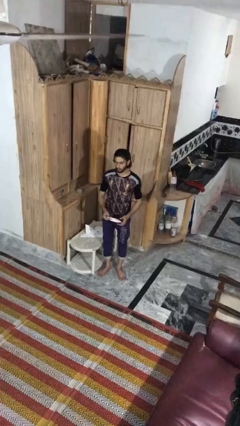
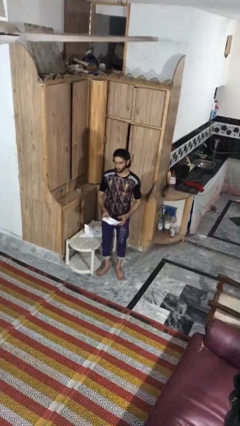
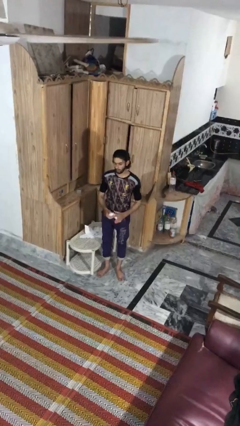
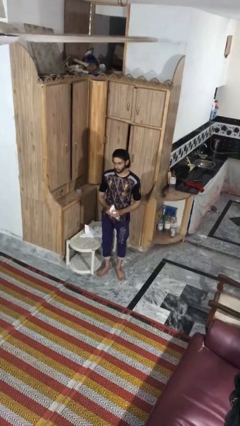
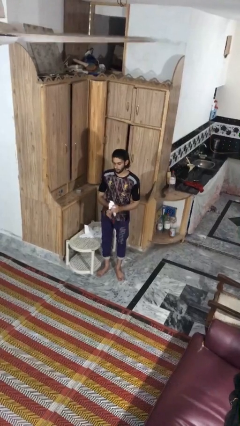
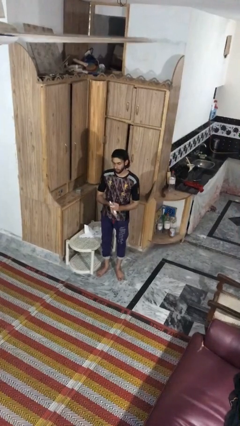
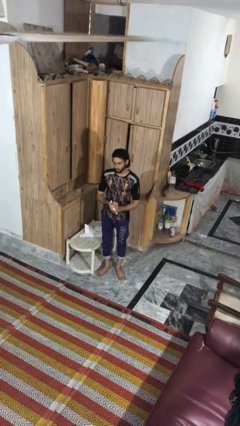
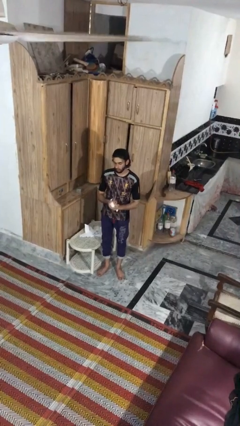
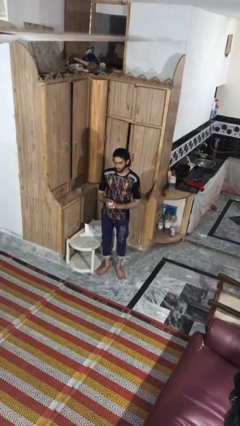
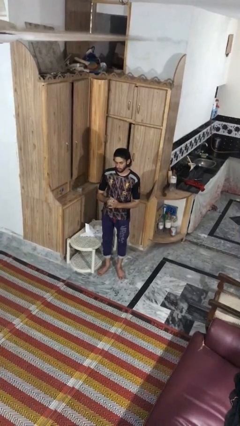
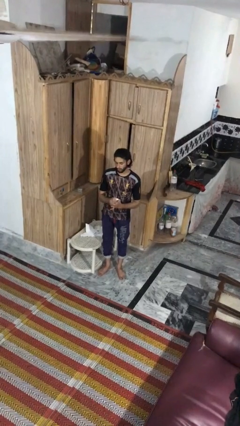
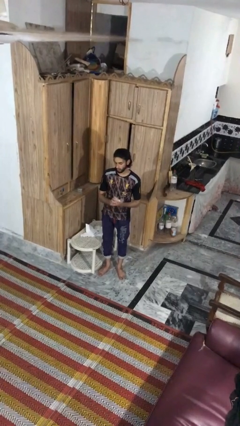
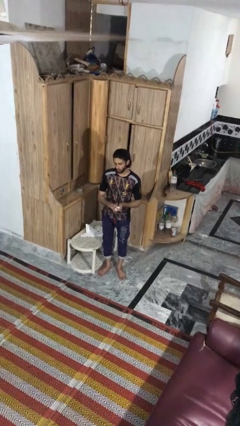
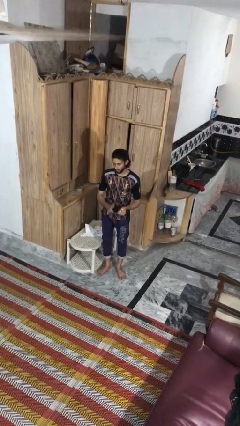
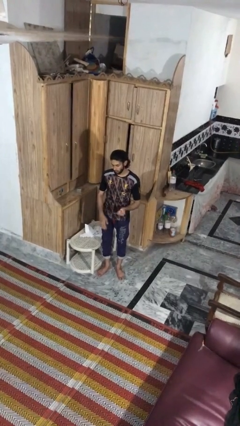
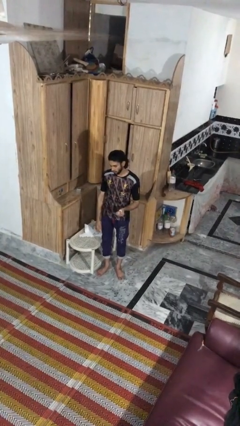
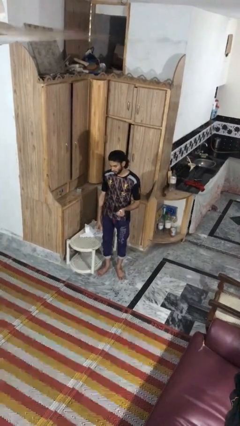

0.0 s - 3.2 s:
person crumples paper

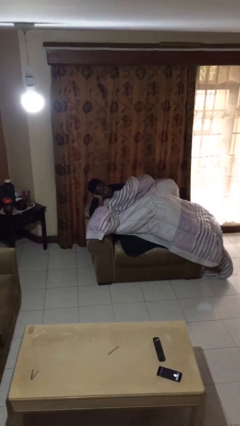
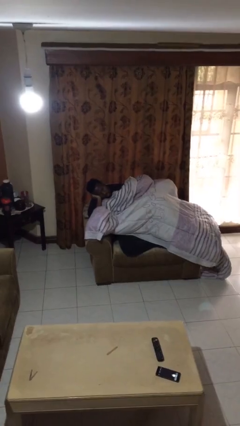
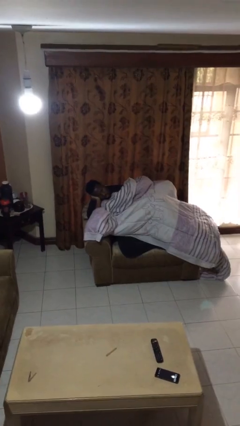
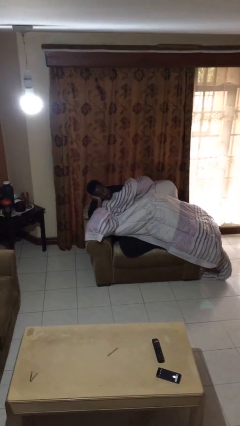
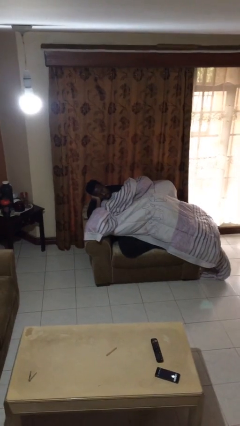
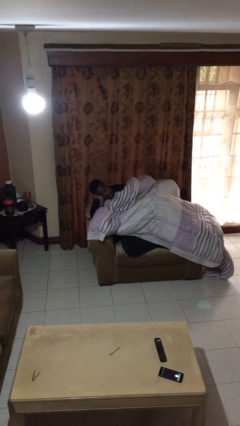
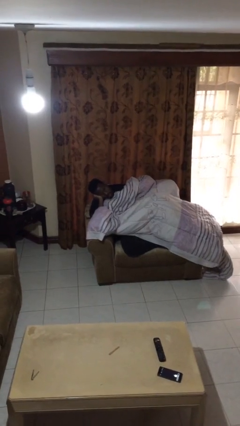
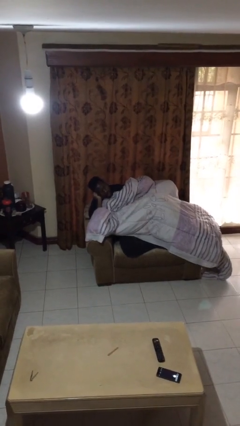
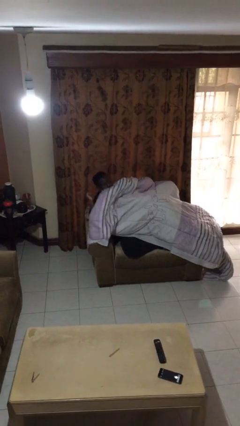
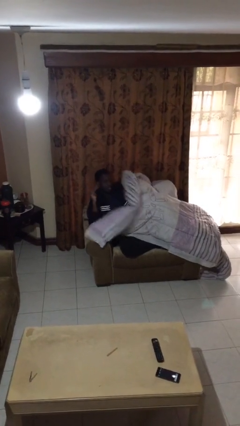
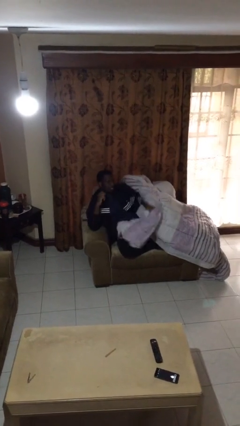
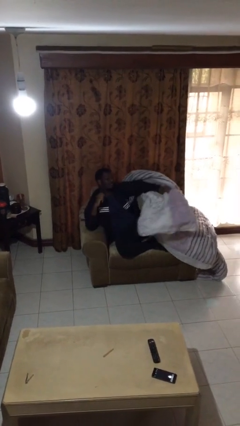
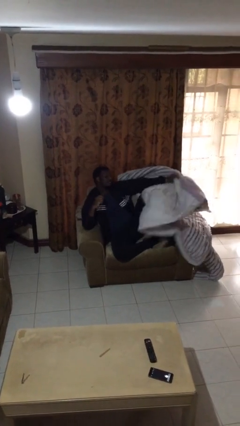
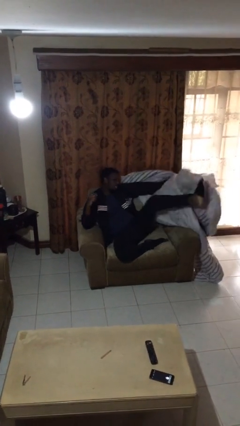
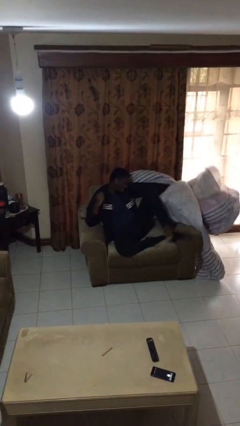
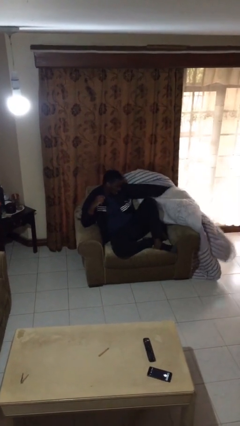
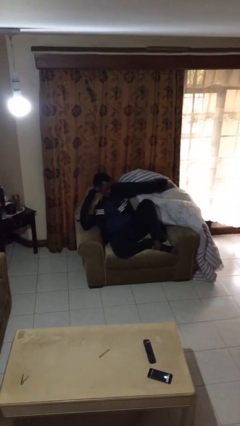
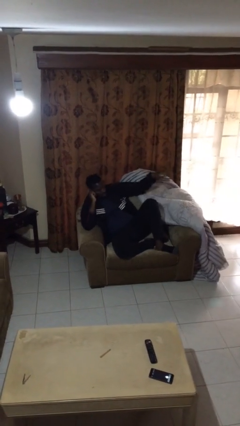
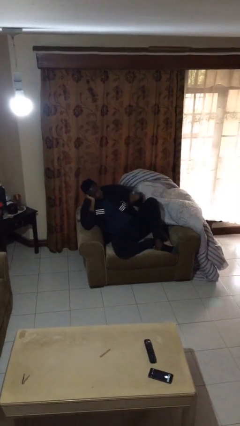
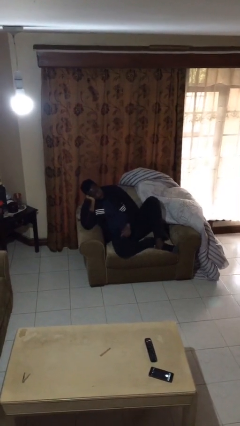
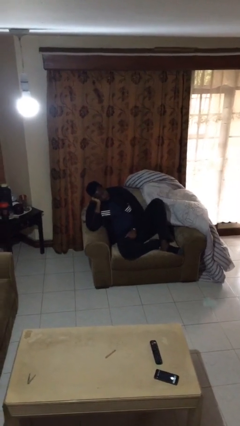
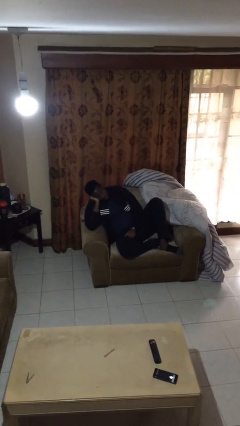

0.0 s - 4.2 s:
person uncovers with blanket

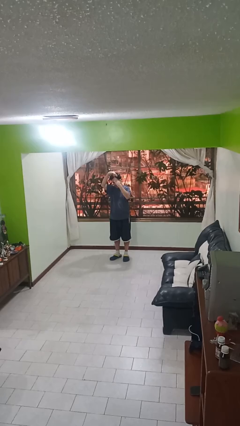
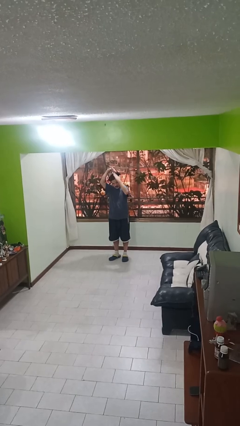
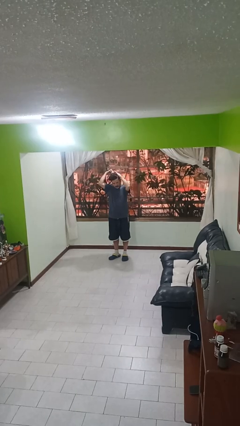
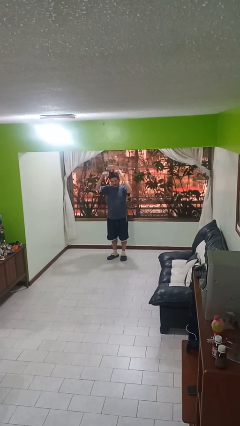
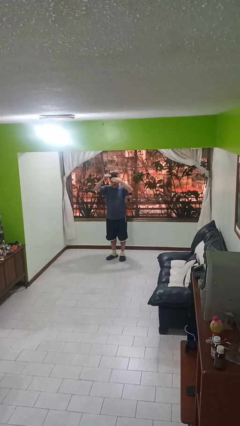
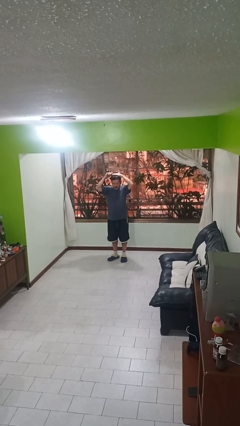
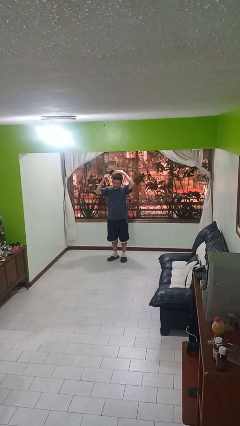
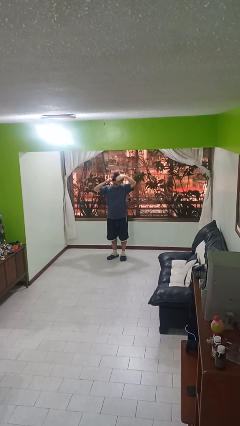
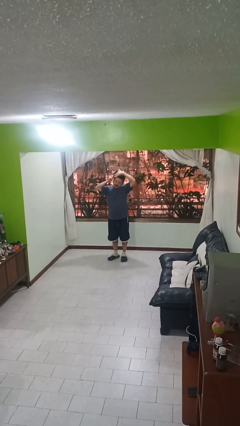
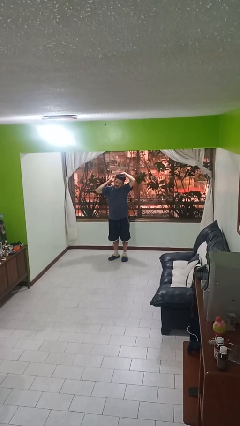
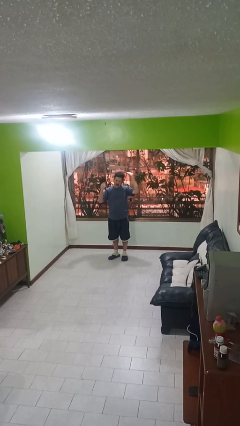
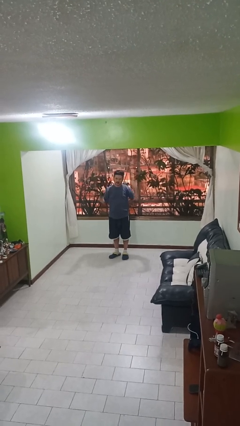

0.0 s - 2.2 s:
person brushes hair

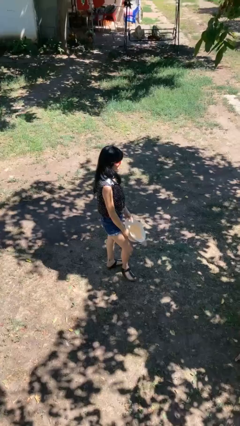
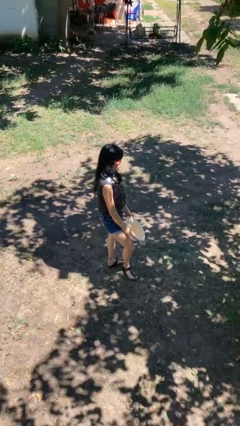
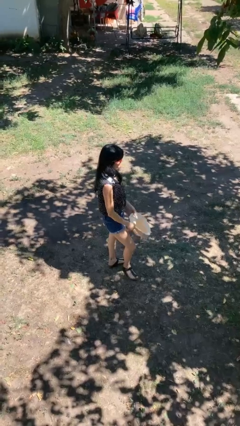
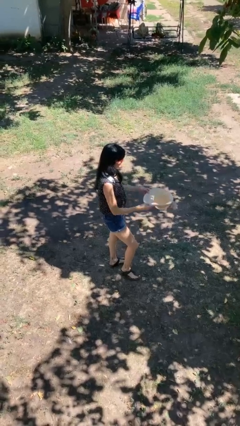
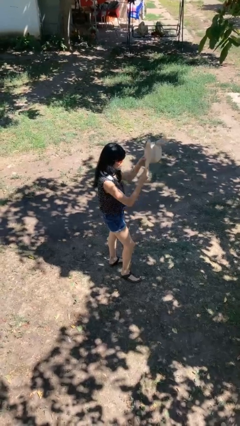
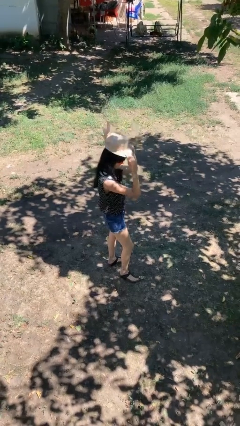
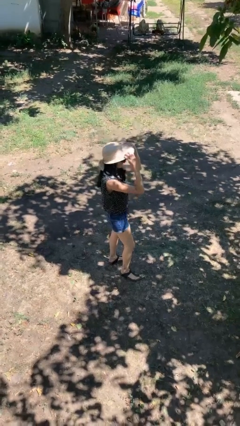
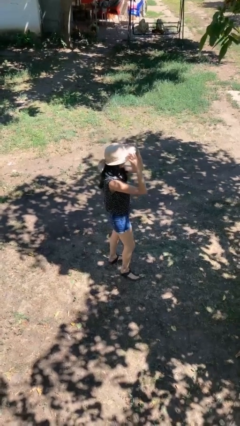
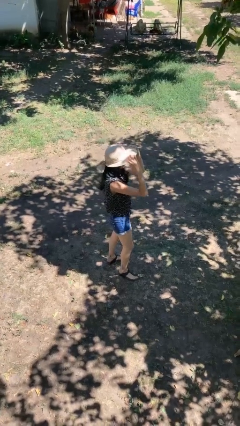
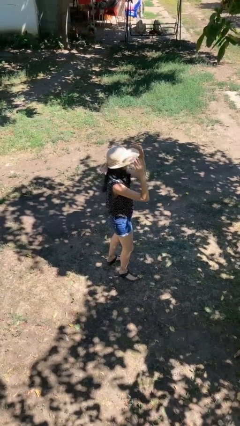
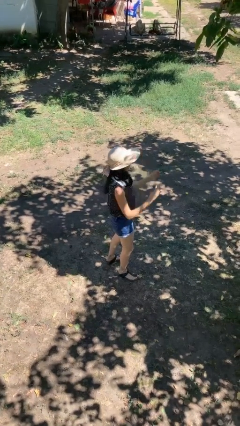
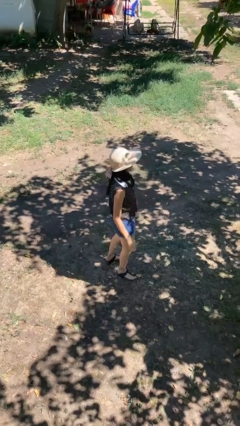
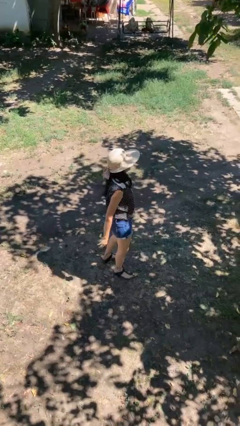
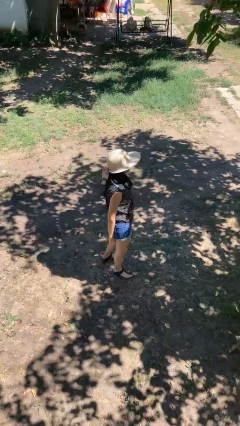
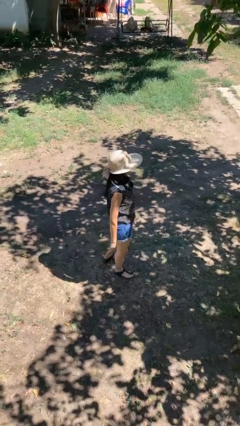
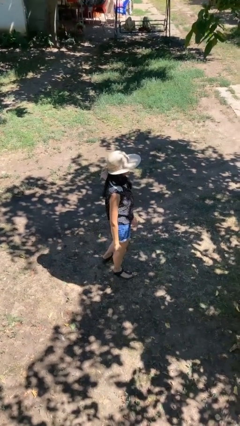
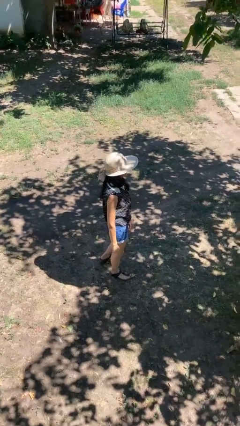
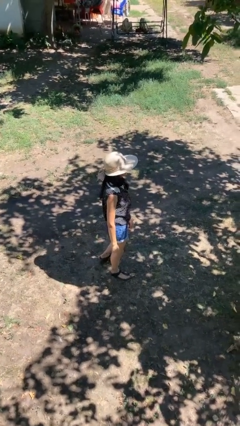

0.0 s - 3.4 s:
person puts on hat

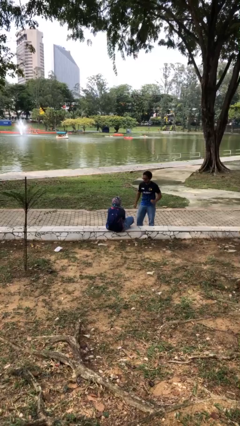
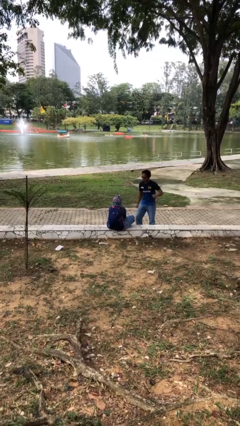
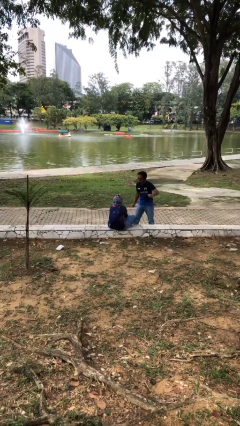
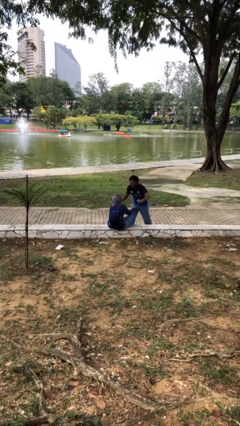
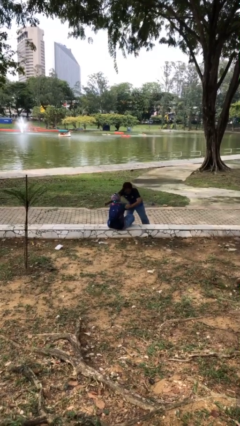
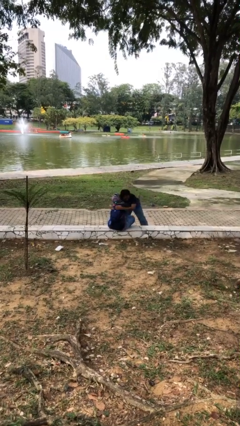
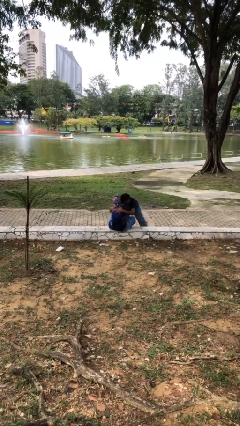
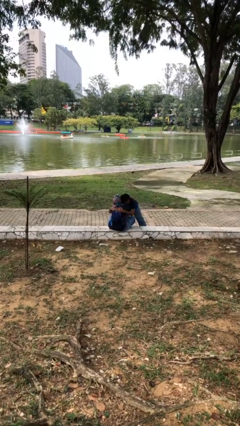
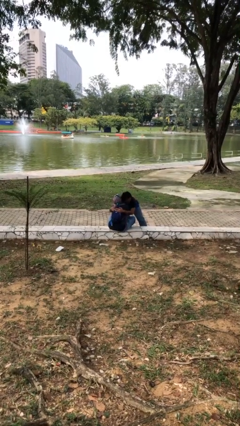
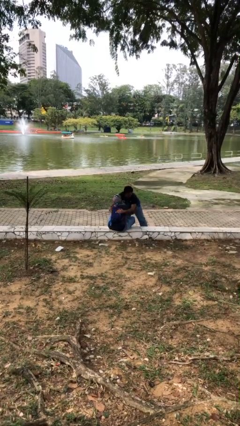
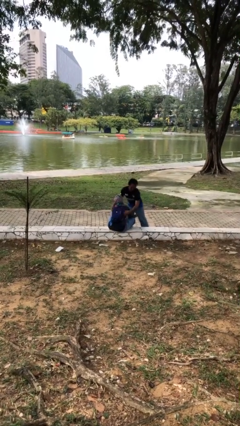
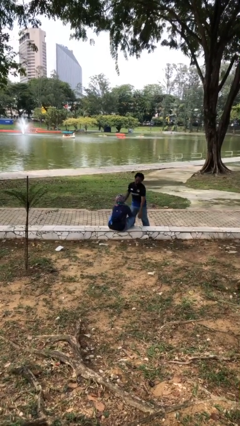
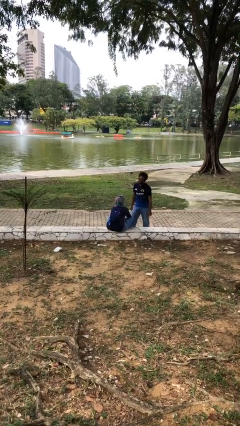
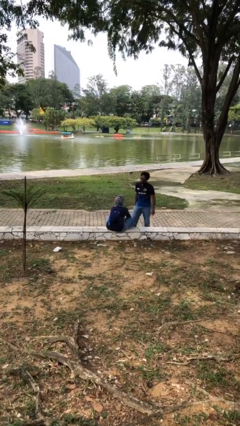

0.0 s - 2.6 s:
person embraces person

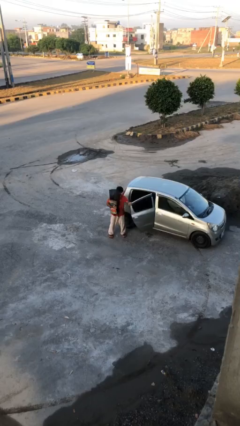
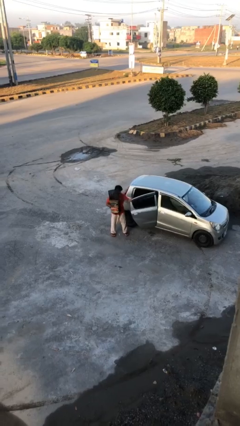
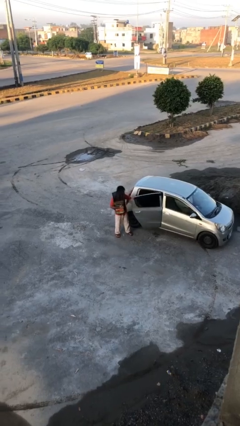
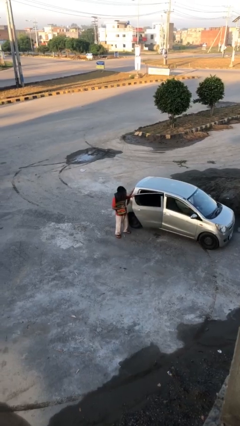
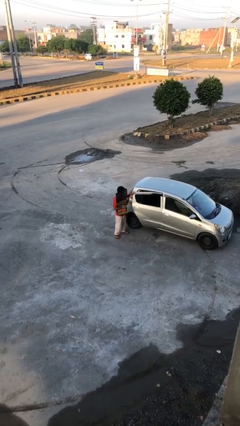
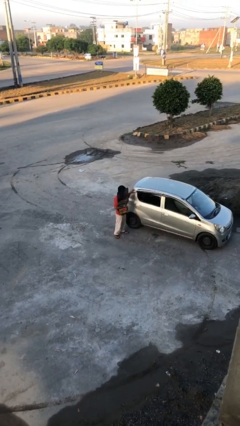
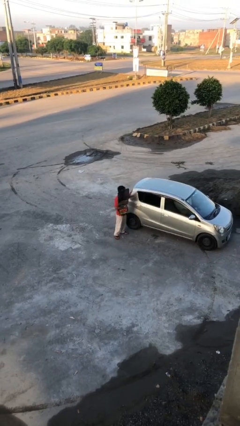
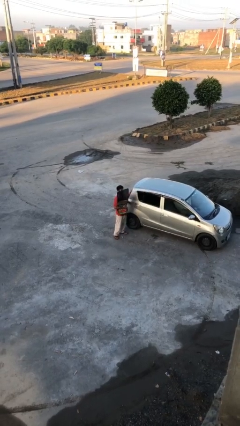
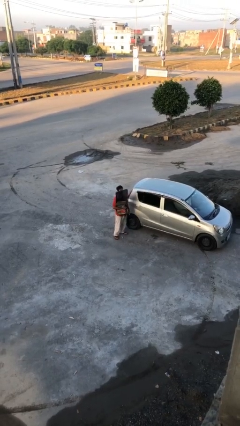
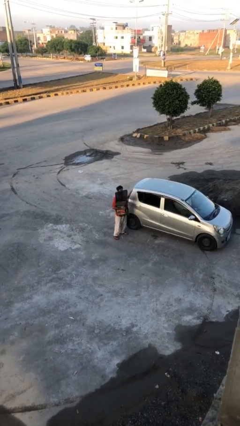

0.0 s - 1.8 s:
person closes car door
